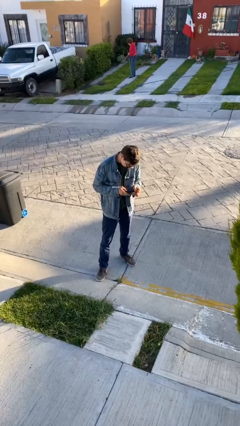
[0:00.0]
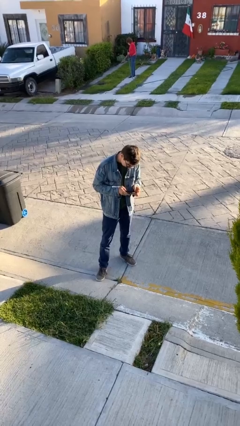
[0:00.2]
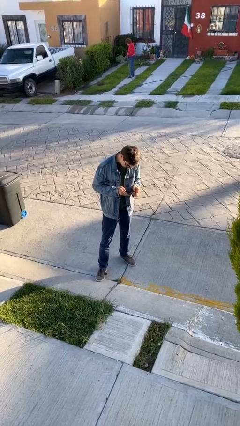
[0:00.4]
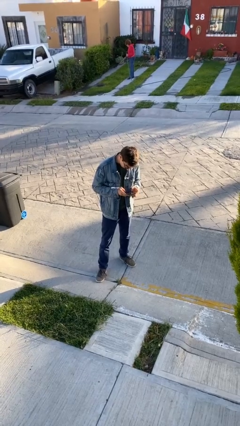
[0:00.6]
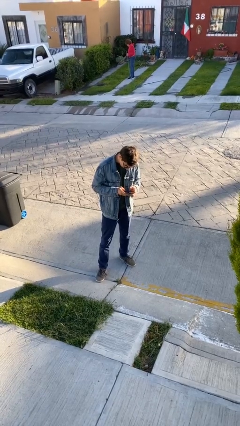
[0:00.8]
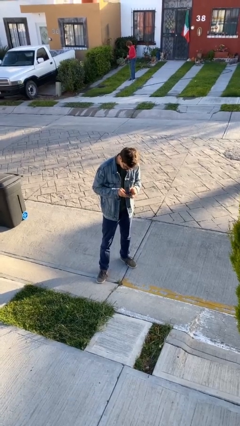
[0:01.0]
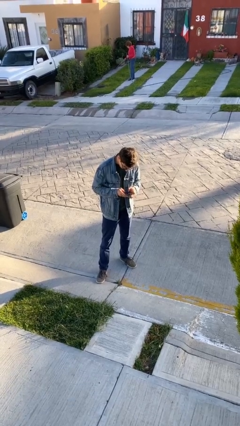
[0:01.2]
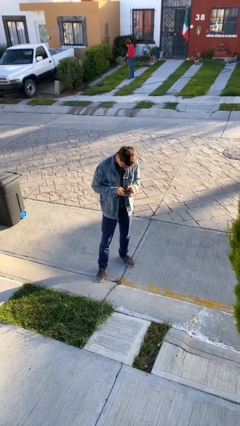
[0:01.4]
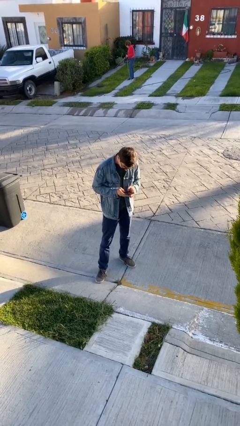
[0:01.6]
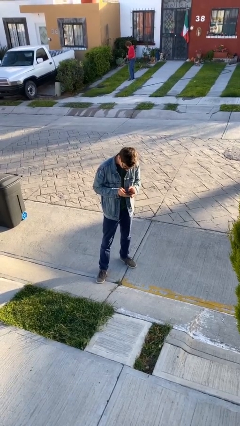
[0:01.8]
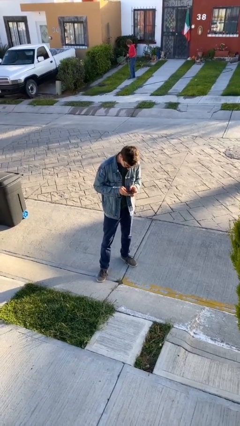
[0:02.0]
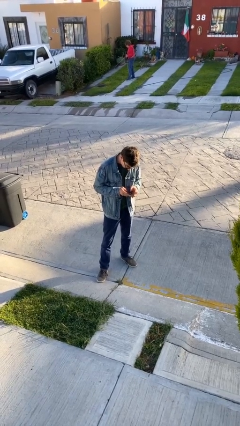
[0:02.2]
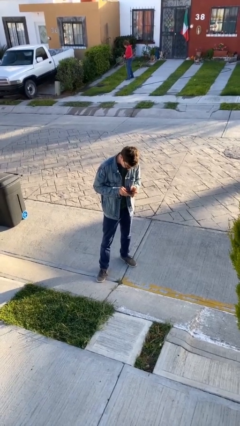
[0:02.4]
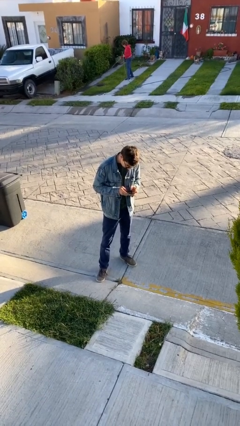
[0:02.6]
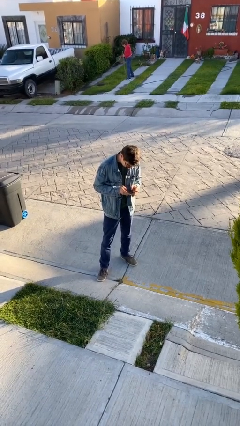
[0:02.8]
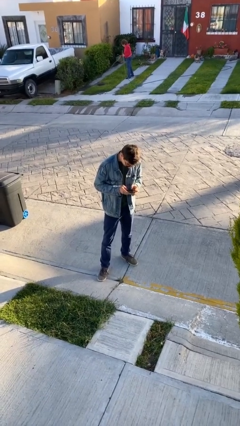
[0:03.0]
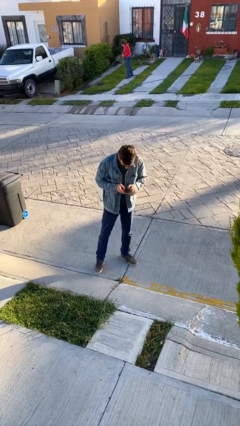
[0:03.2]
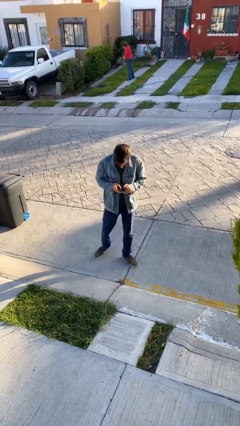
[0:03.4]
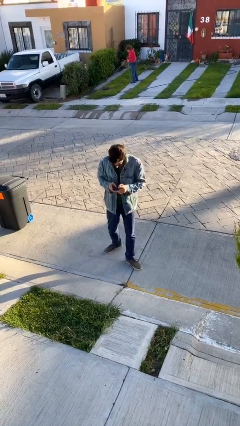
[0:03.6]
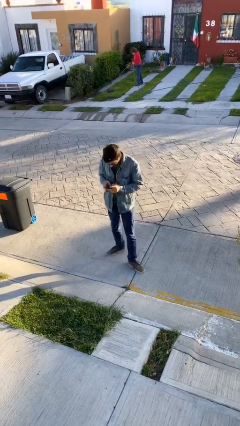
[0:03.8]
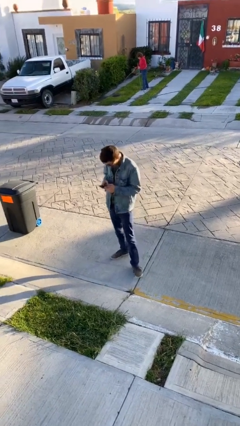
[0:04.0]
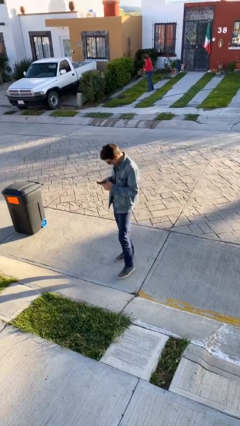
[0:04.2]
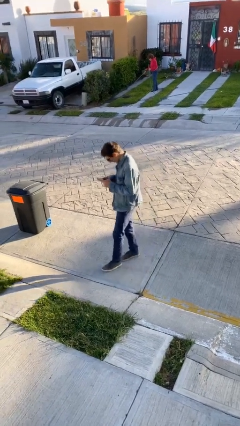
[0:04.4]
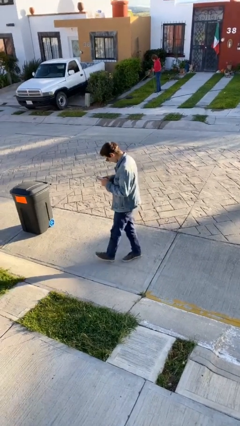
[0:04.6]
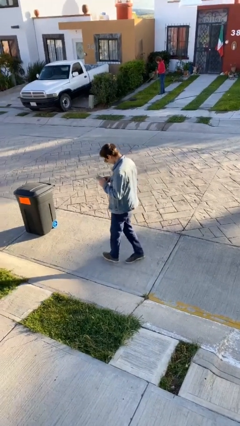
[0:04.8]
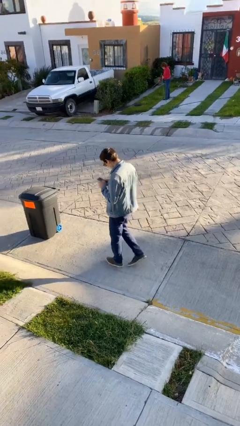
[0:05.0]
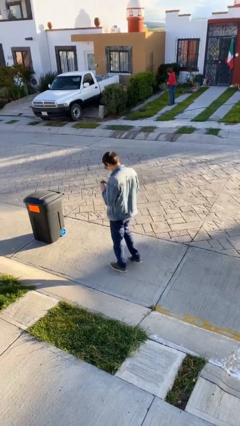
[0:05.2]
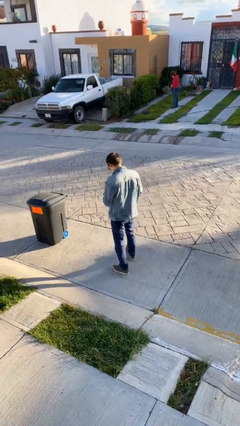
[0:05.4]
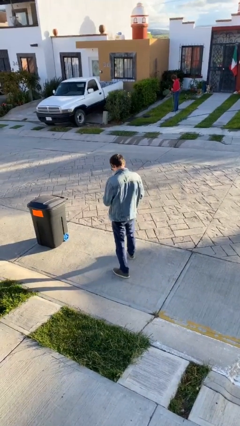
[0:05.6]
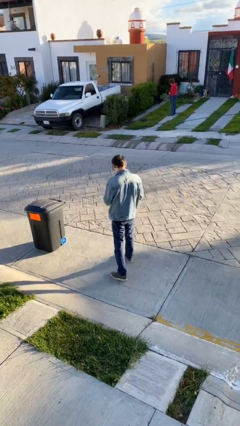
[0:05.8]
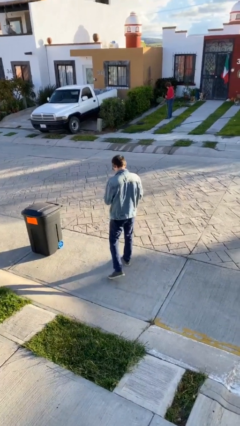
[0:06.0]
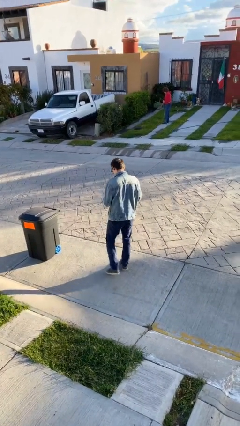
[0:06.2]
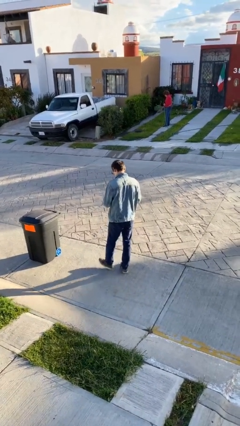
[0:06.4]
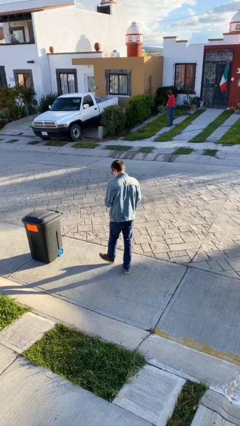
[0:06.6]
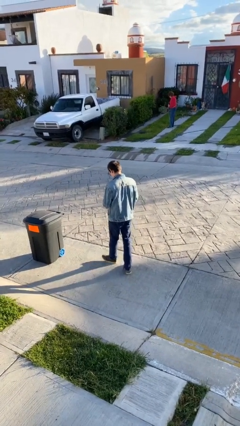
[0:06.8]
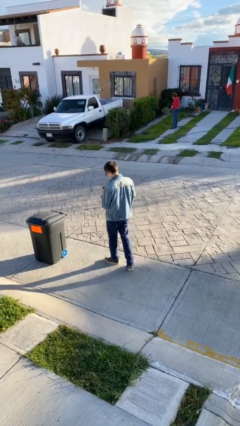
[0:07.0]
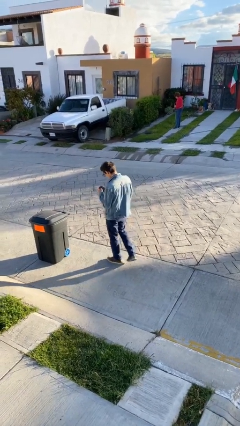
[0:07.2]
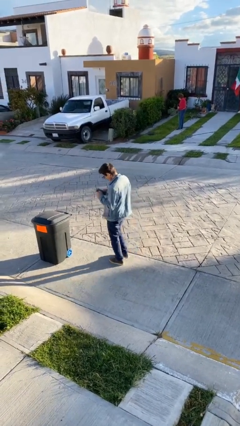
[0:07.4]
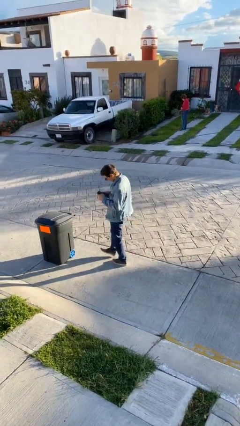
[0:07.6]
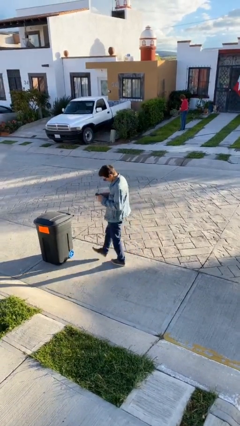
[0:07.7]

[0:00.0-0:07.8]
person texts on phone

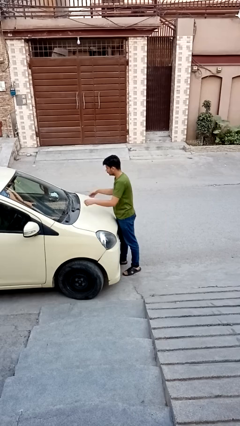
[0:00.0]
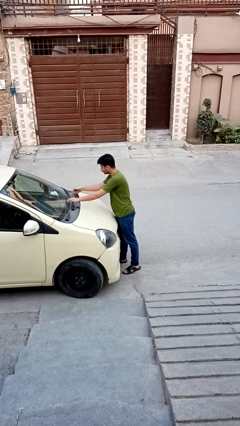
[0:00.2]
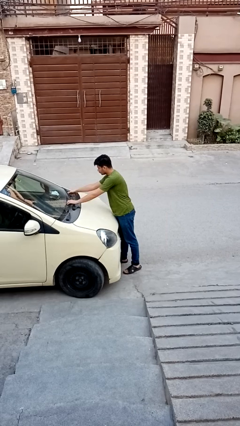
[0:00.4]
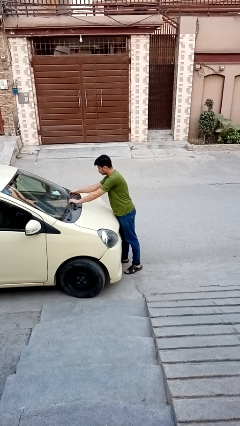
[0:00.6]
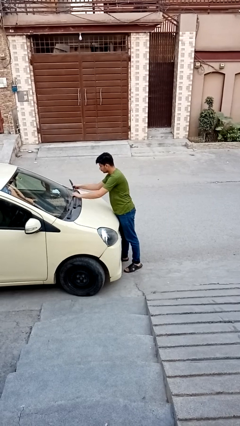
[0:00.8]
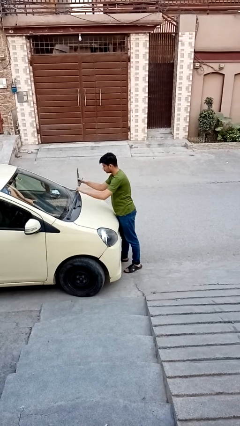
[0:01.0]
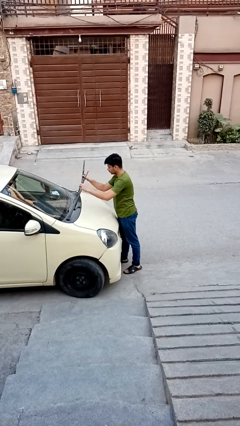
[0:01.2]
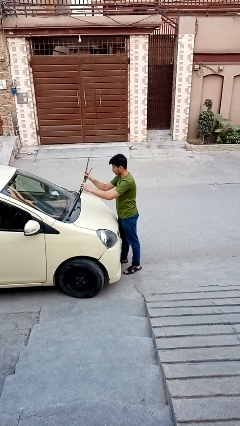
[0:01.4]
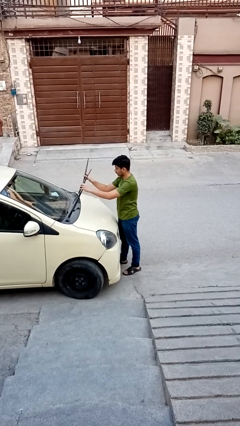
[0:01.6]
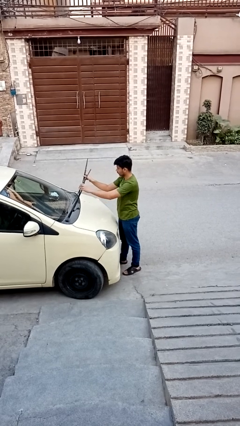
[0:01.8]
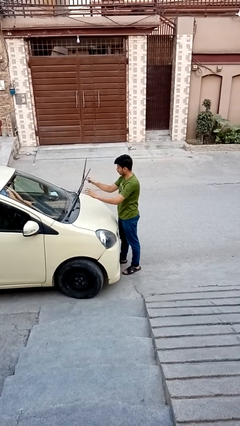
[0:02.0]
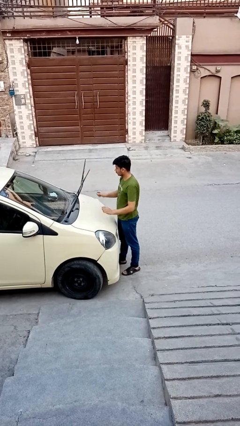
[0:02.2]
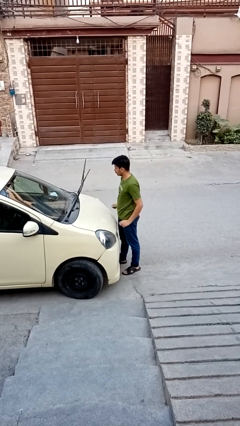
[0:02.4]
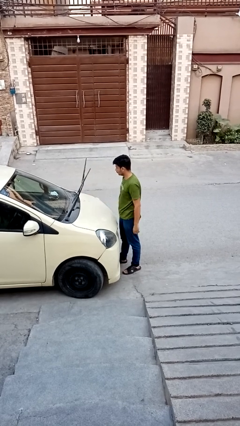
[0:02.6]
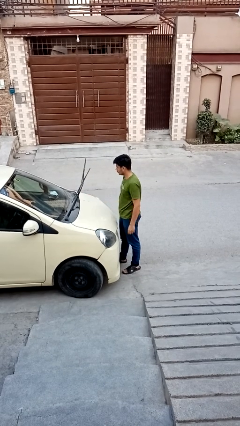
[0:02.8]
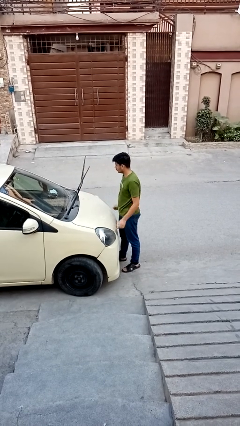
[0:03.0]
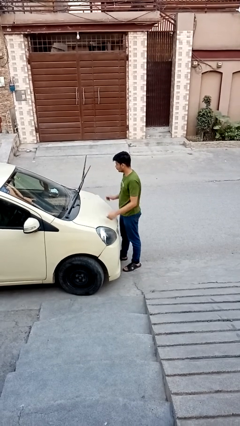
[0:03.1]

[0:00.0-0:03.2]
person flips up car wipers

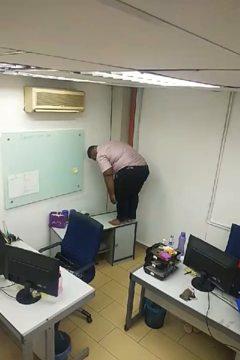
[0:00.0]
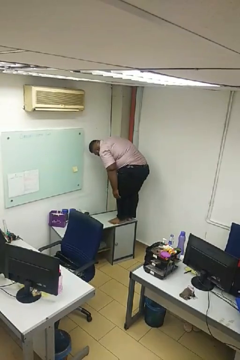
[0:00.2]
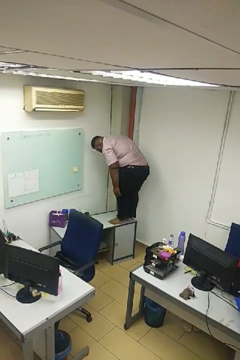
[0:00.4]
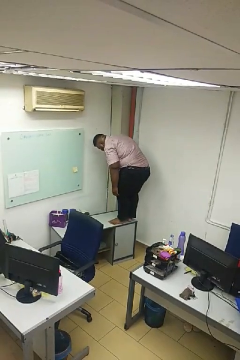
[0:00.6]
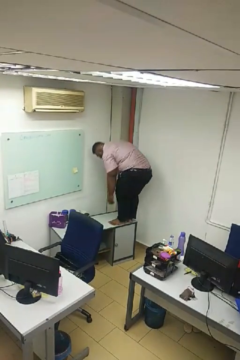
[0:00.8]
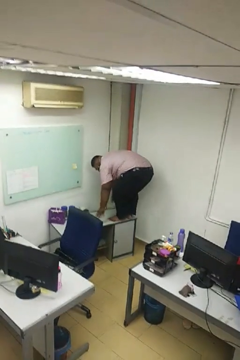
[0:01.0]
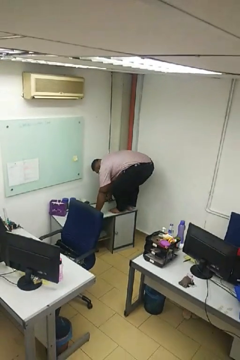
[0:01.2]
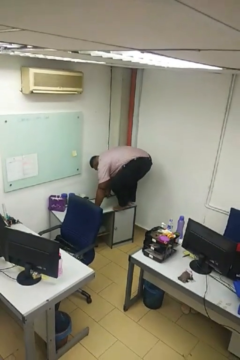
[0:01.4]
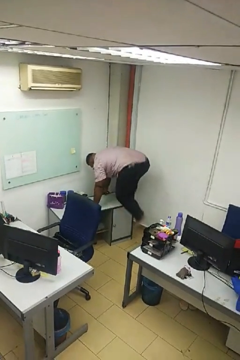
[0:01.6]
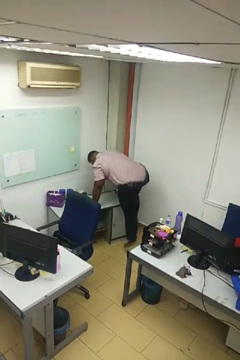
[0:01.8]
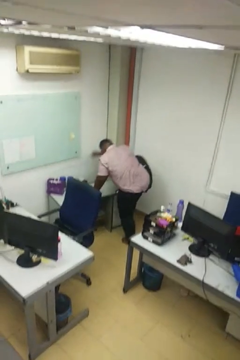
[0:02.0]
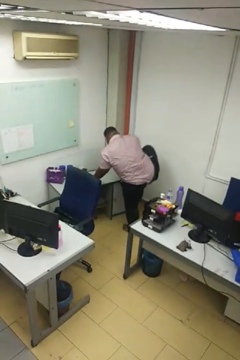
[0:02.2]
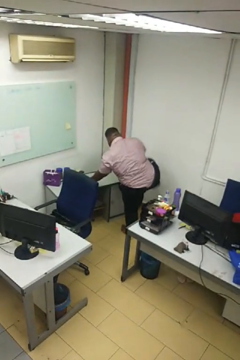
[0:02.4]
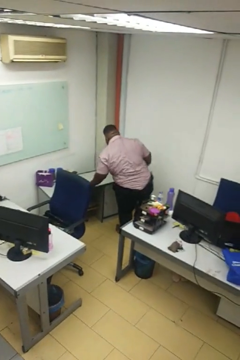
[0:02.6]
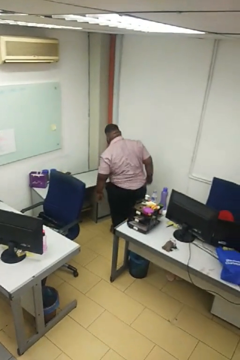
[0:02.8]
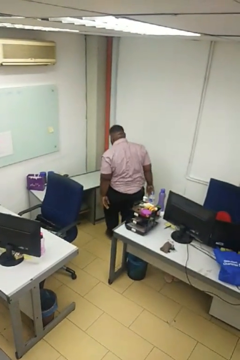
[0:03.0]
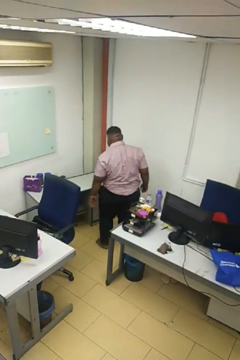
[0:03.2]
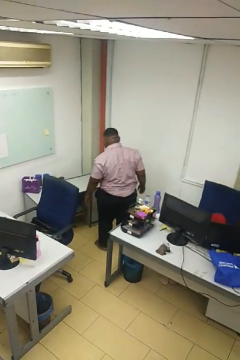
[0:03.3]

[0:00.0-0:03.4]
person climbs off table

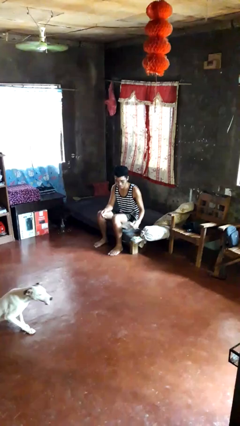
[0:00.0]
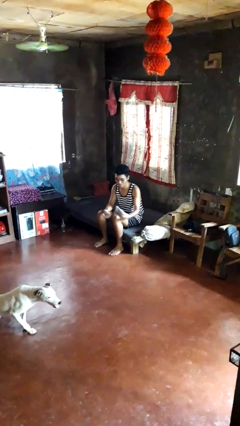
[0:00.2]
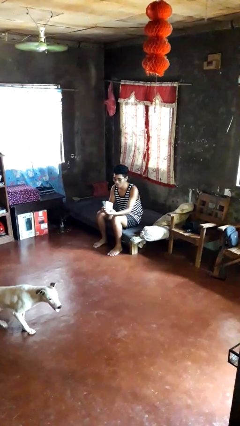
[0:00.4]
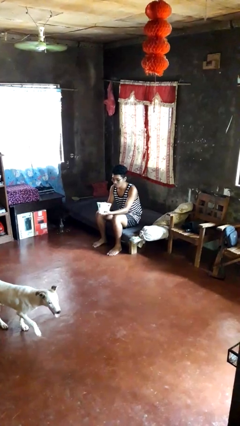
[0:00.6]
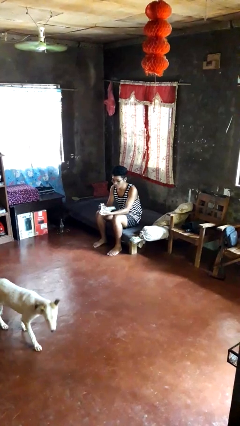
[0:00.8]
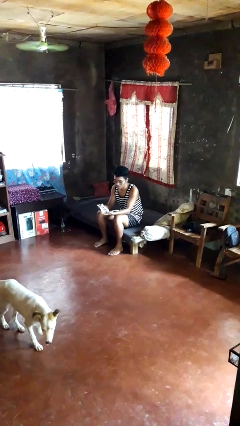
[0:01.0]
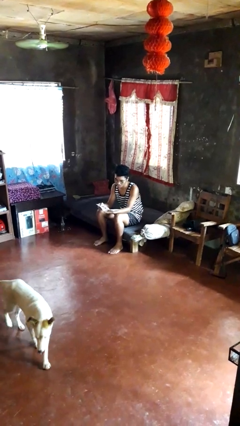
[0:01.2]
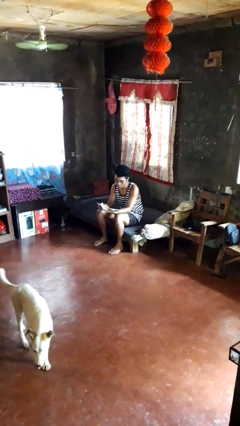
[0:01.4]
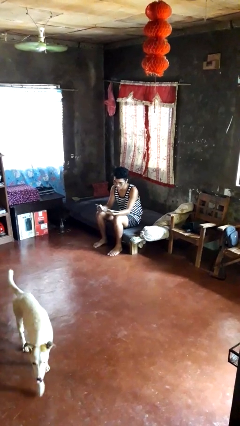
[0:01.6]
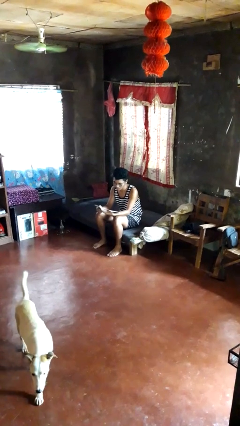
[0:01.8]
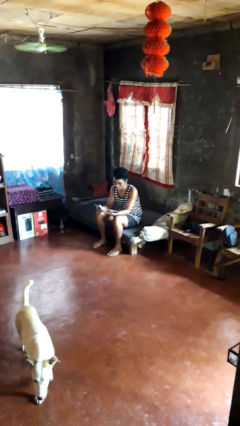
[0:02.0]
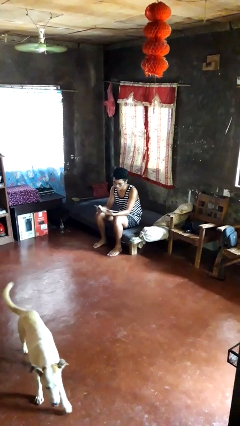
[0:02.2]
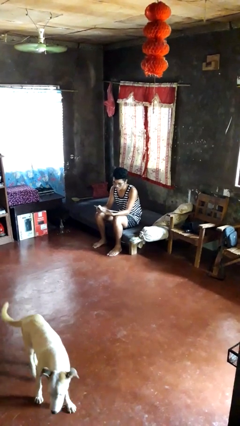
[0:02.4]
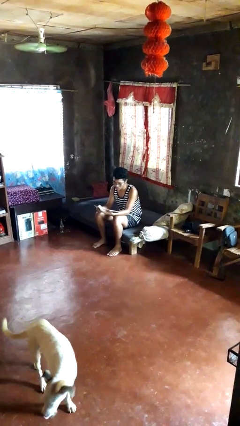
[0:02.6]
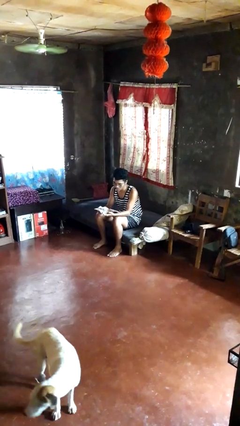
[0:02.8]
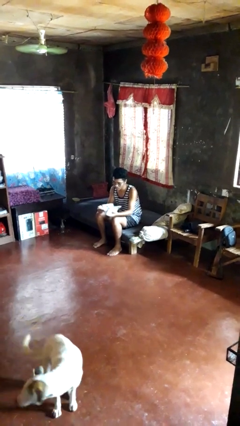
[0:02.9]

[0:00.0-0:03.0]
person reads magazine

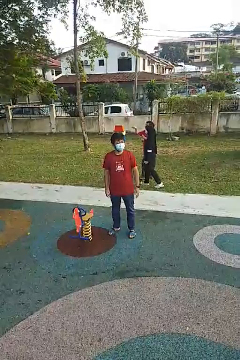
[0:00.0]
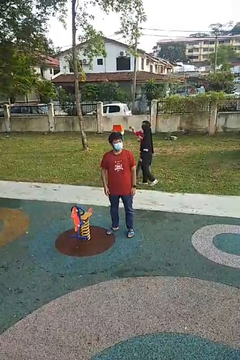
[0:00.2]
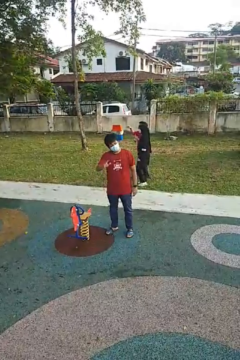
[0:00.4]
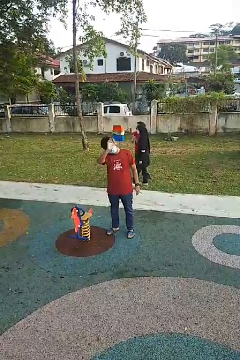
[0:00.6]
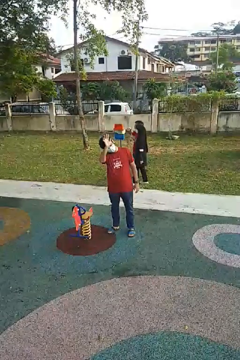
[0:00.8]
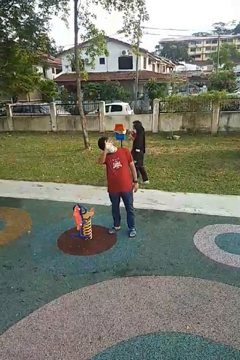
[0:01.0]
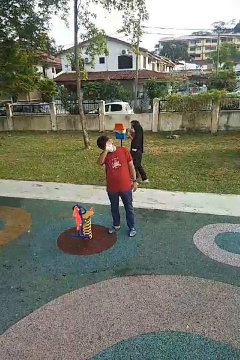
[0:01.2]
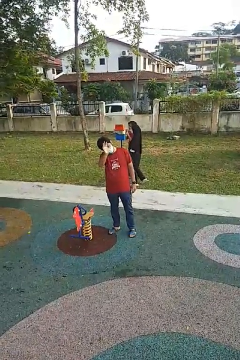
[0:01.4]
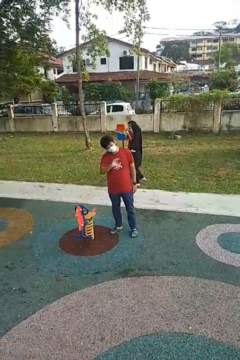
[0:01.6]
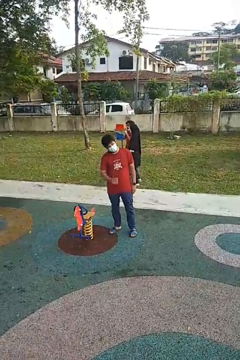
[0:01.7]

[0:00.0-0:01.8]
person waves at person
